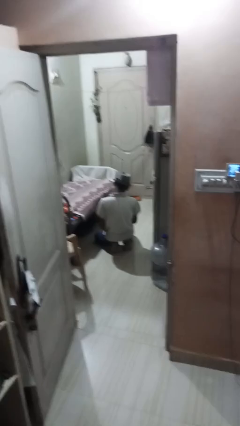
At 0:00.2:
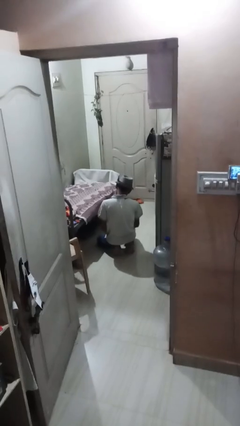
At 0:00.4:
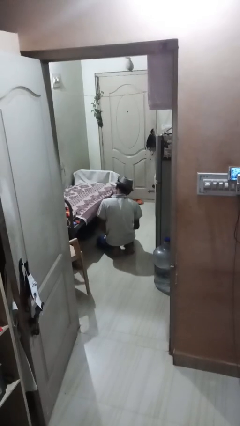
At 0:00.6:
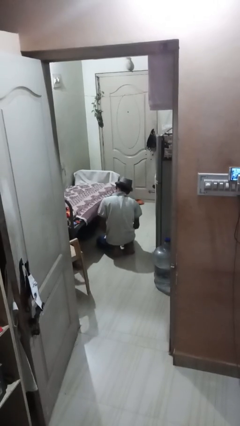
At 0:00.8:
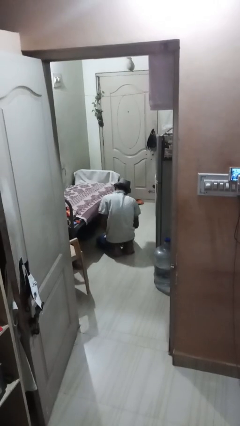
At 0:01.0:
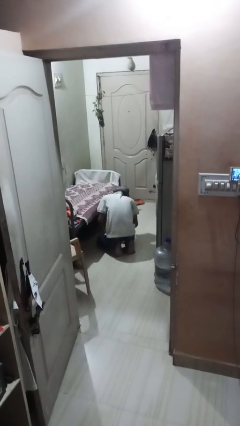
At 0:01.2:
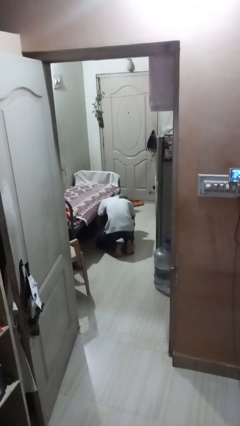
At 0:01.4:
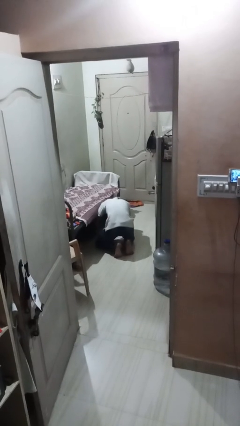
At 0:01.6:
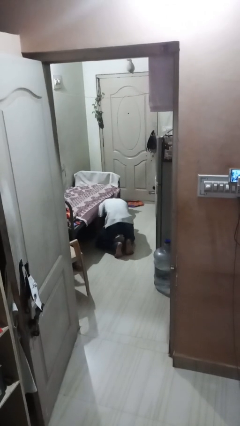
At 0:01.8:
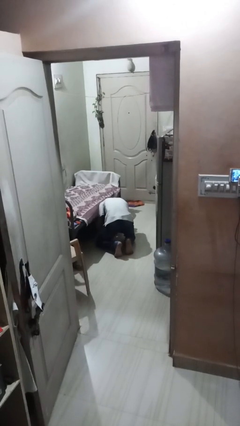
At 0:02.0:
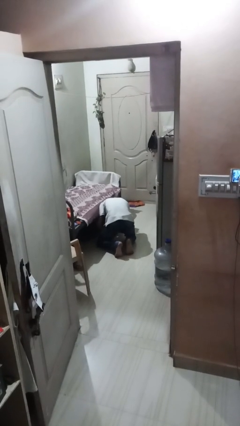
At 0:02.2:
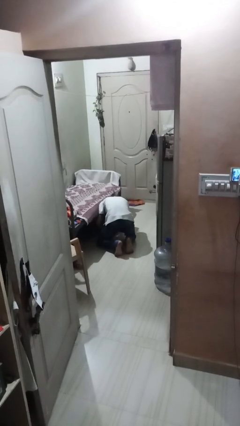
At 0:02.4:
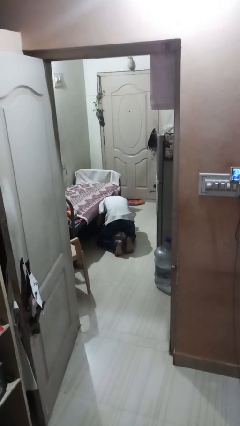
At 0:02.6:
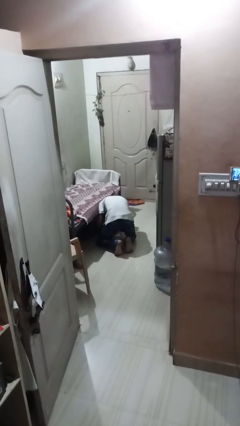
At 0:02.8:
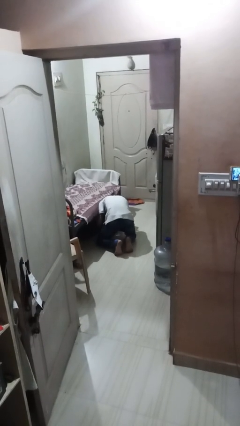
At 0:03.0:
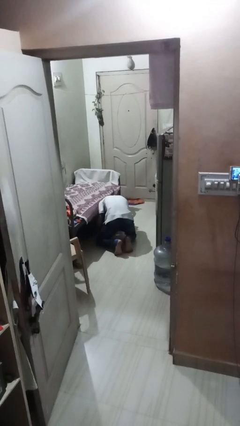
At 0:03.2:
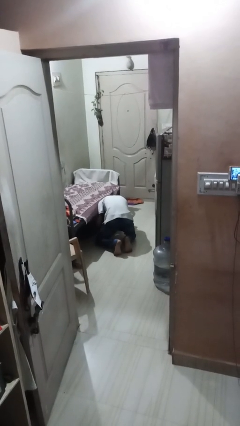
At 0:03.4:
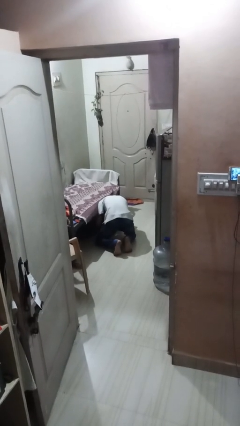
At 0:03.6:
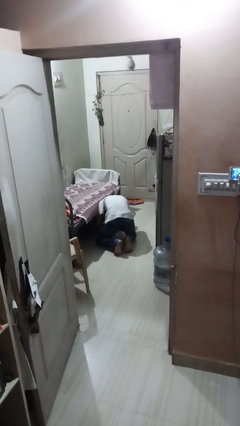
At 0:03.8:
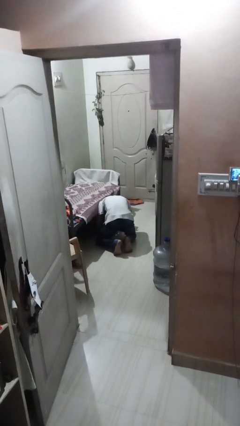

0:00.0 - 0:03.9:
person searches under bed

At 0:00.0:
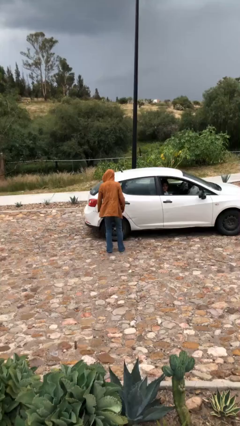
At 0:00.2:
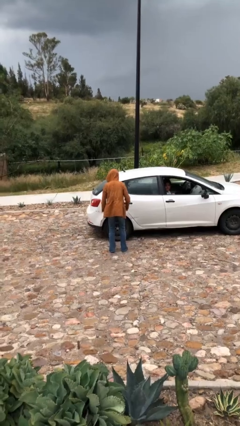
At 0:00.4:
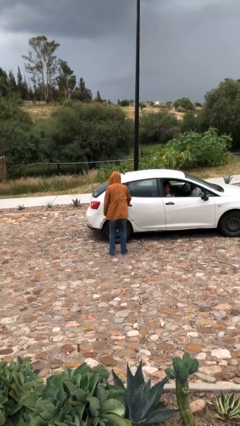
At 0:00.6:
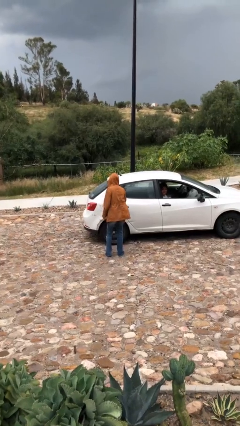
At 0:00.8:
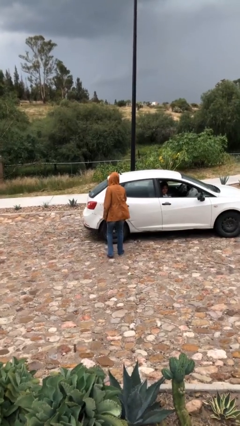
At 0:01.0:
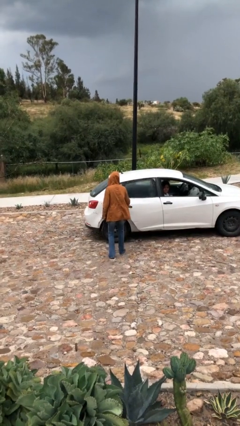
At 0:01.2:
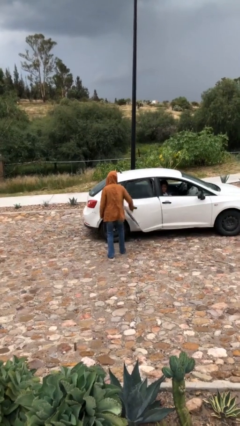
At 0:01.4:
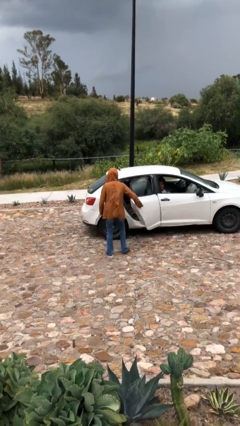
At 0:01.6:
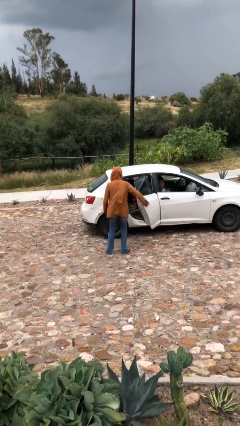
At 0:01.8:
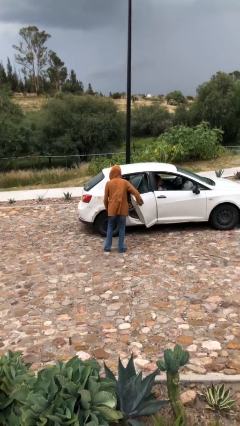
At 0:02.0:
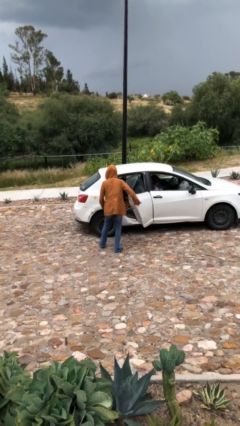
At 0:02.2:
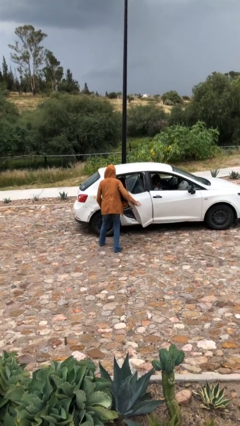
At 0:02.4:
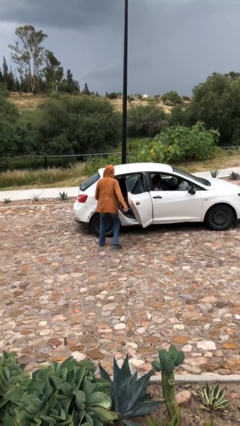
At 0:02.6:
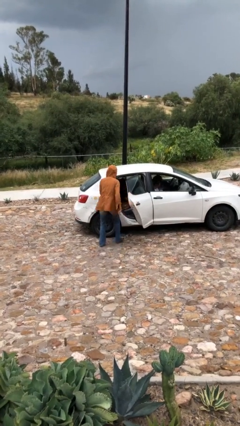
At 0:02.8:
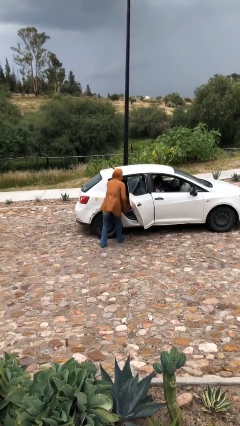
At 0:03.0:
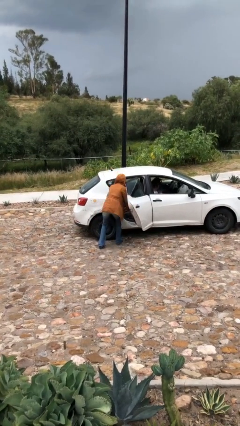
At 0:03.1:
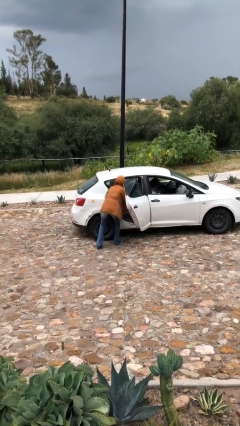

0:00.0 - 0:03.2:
person opens car door

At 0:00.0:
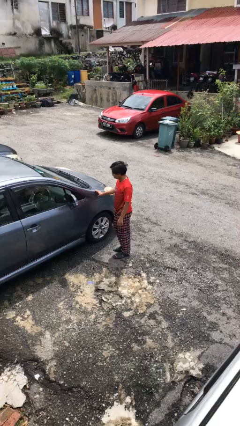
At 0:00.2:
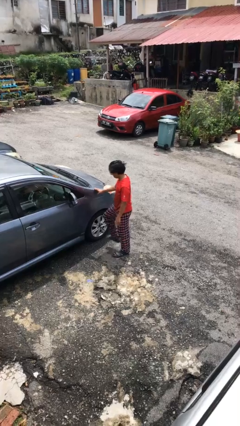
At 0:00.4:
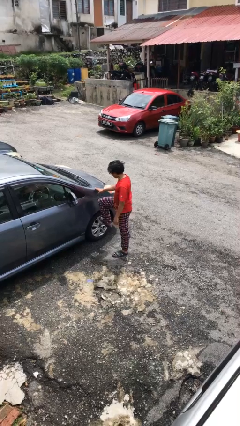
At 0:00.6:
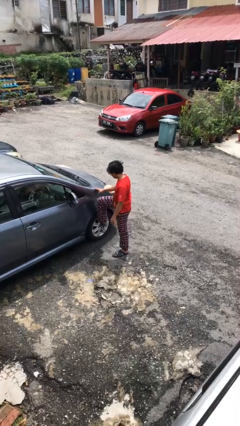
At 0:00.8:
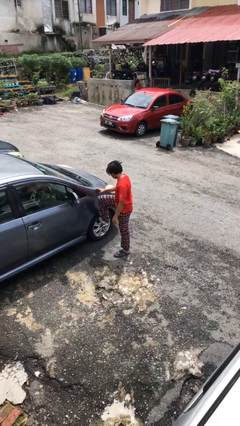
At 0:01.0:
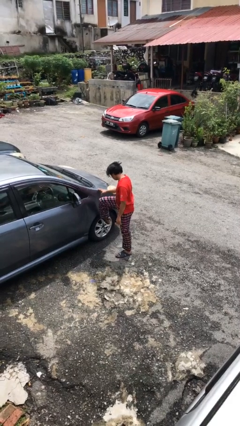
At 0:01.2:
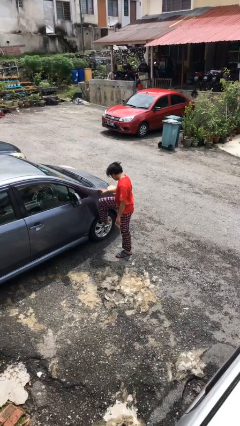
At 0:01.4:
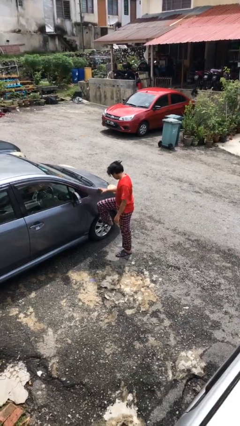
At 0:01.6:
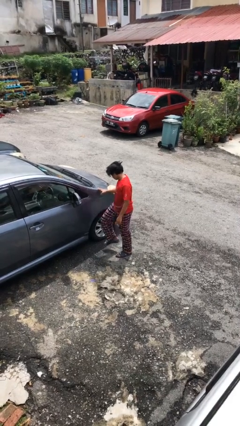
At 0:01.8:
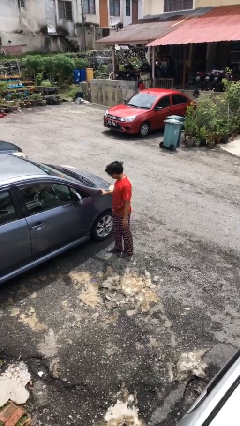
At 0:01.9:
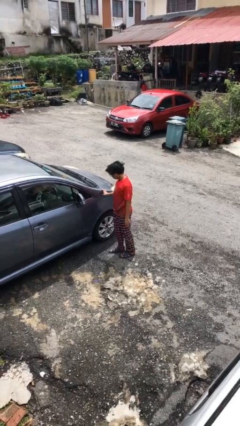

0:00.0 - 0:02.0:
person kicks car tires

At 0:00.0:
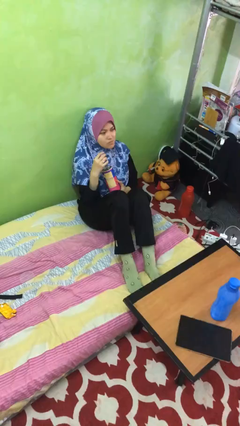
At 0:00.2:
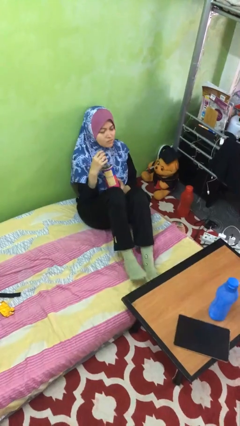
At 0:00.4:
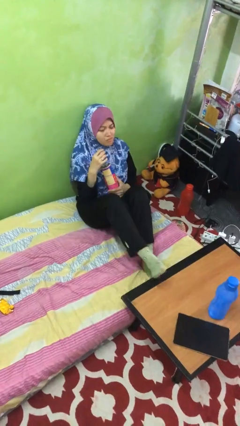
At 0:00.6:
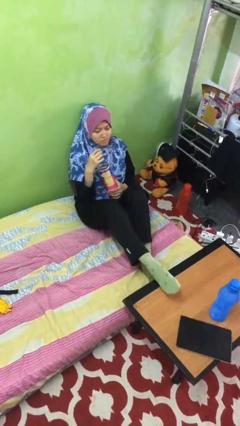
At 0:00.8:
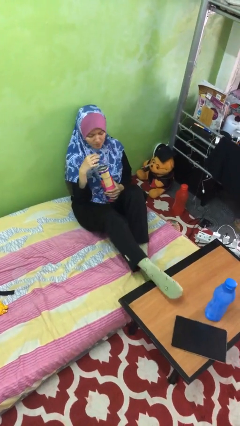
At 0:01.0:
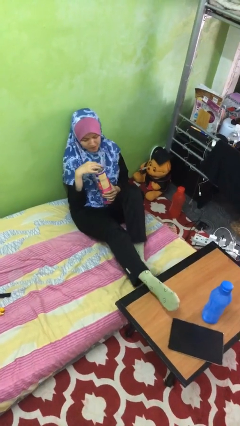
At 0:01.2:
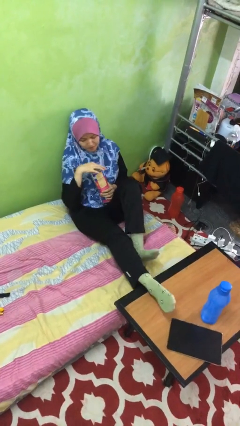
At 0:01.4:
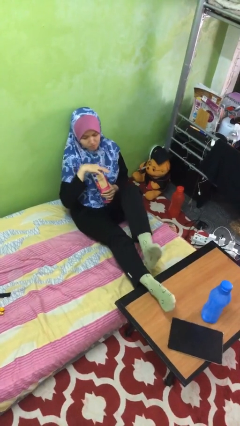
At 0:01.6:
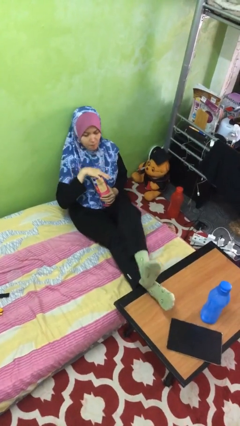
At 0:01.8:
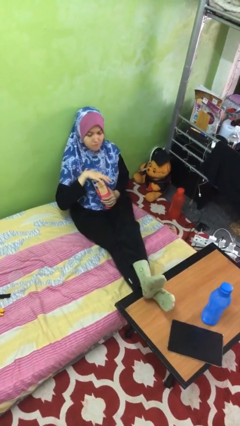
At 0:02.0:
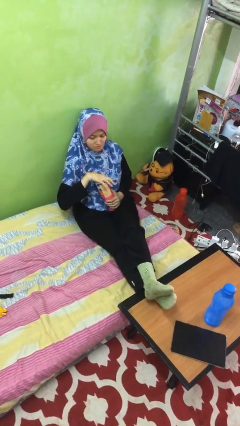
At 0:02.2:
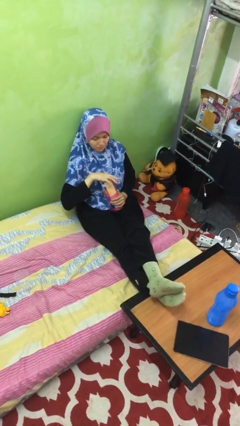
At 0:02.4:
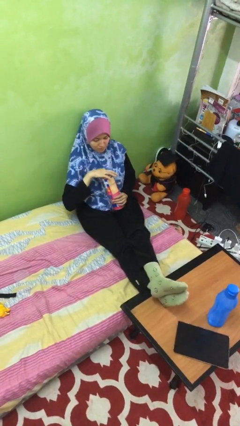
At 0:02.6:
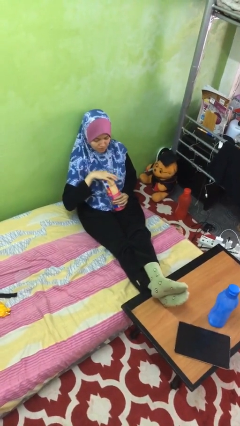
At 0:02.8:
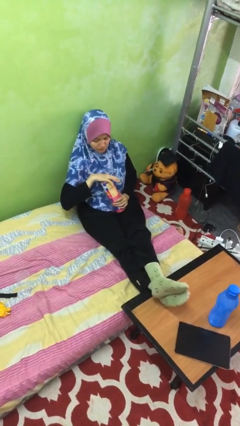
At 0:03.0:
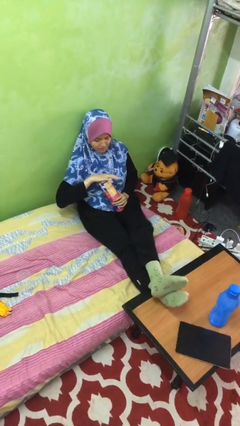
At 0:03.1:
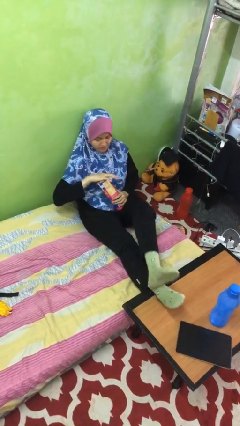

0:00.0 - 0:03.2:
person puts feet up

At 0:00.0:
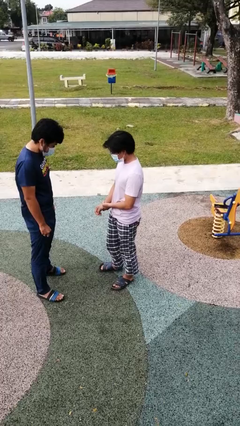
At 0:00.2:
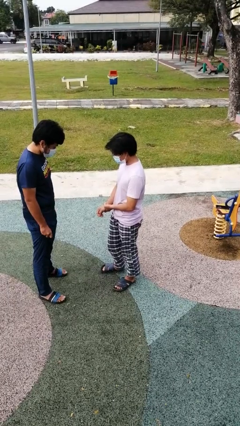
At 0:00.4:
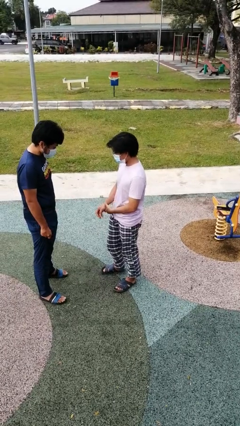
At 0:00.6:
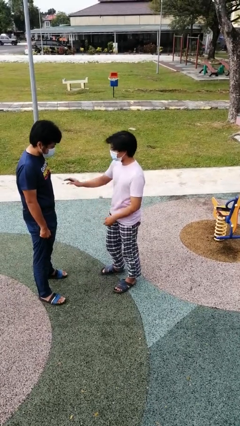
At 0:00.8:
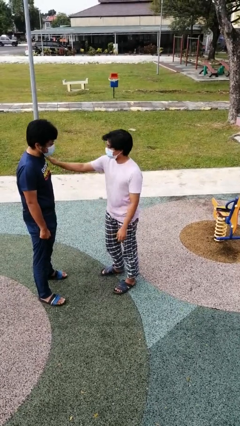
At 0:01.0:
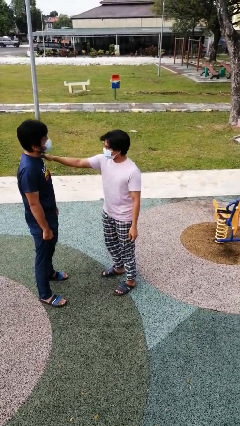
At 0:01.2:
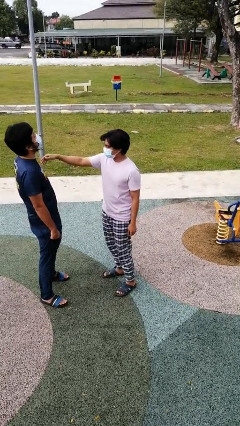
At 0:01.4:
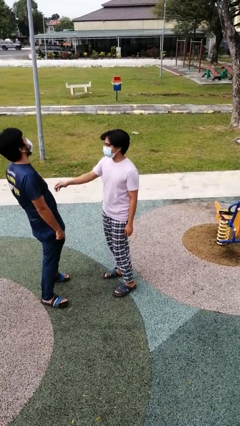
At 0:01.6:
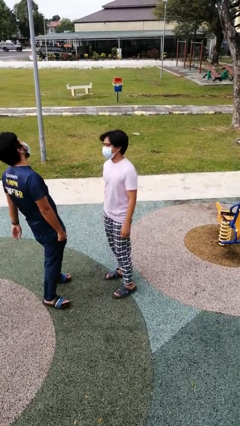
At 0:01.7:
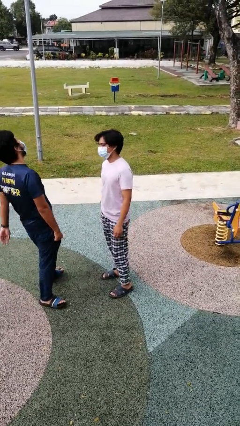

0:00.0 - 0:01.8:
person shoves person

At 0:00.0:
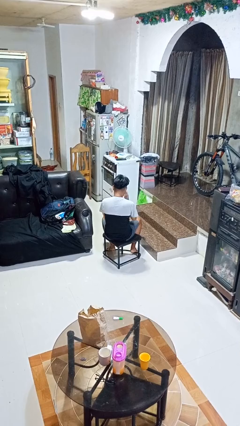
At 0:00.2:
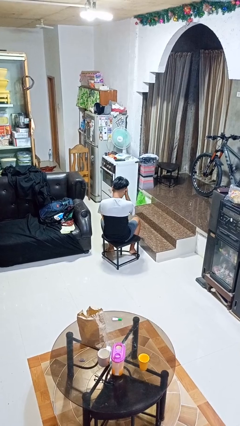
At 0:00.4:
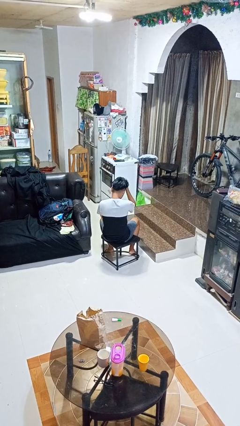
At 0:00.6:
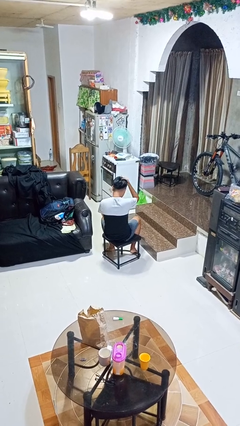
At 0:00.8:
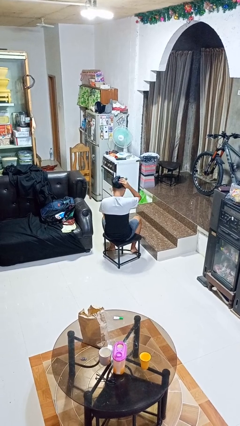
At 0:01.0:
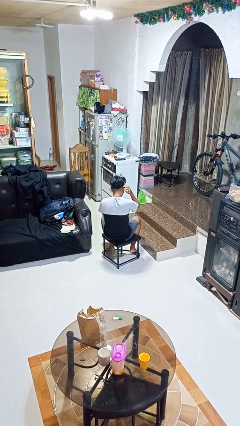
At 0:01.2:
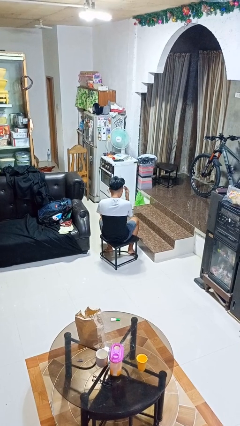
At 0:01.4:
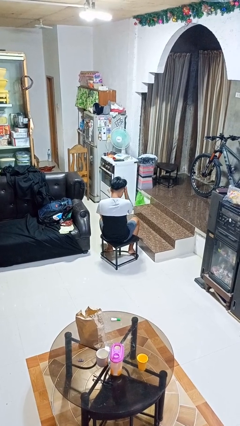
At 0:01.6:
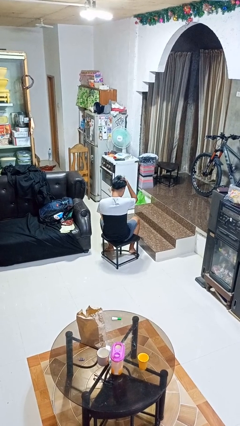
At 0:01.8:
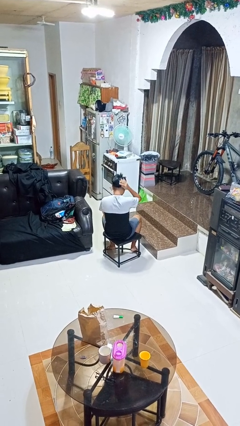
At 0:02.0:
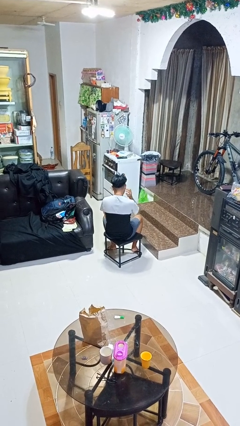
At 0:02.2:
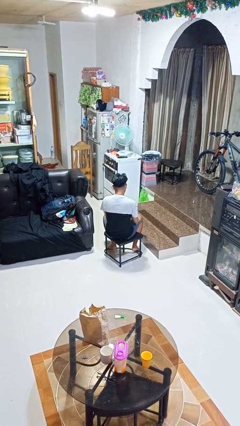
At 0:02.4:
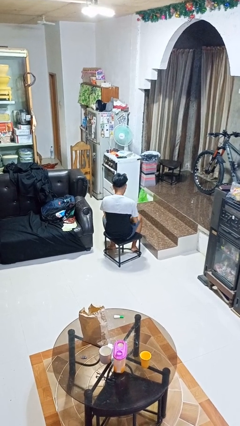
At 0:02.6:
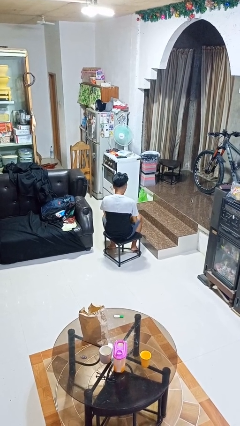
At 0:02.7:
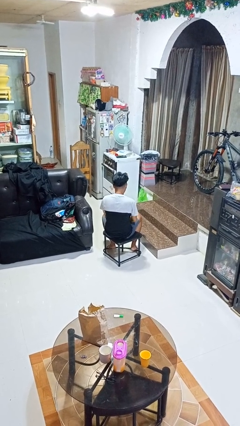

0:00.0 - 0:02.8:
person strokes hair

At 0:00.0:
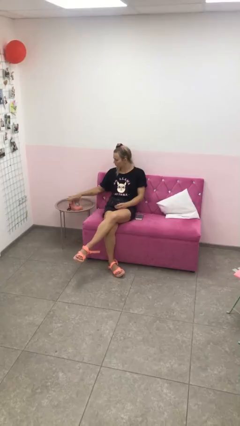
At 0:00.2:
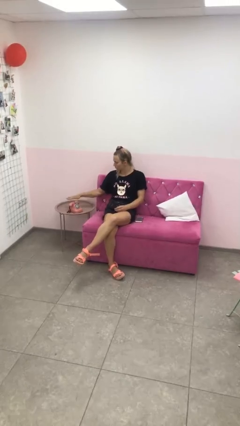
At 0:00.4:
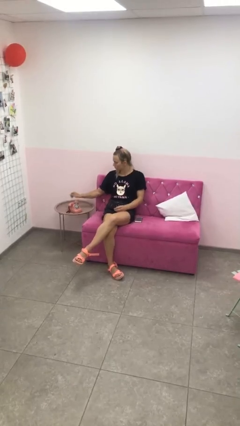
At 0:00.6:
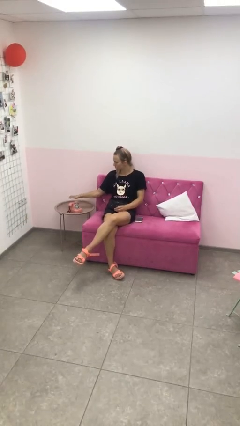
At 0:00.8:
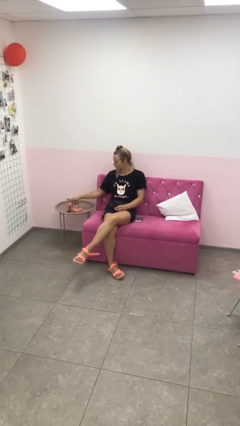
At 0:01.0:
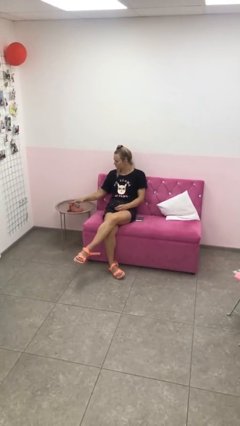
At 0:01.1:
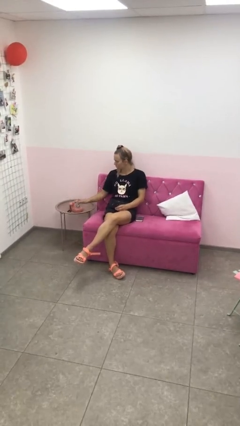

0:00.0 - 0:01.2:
person waves hand over object
